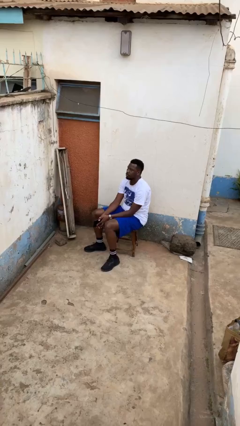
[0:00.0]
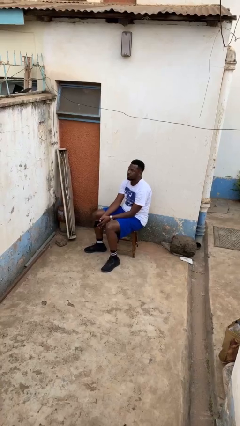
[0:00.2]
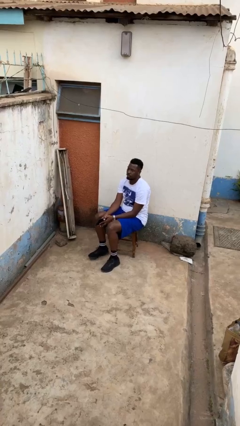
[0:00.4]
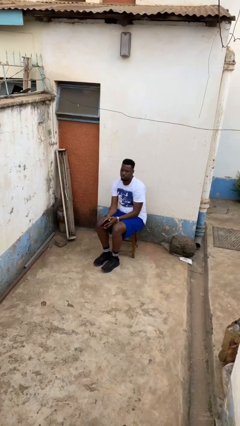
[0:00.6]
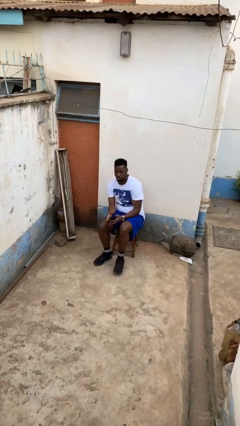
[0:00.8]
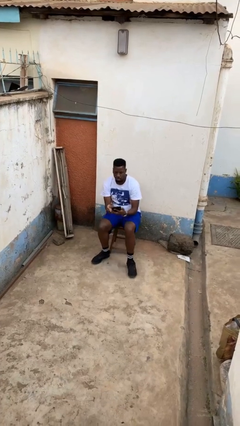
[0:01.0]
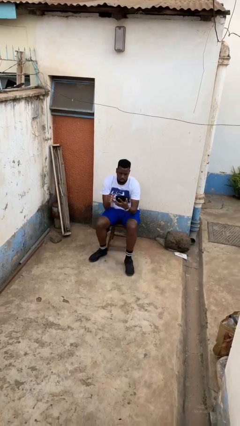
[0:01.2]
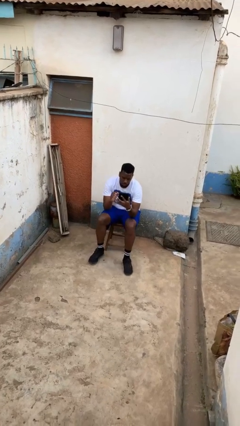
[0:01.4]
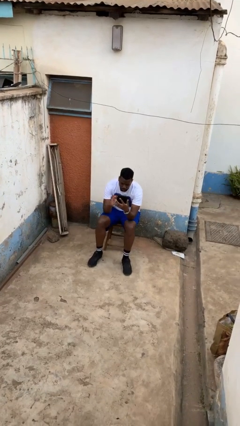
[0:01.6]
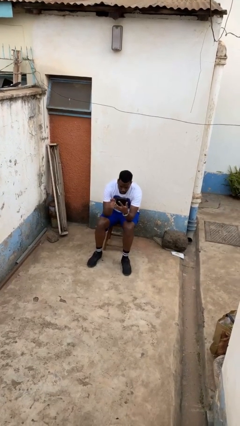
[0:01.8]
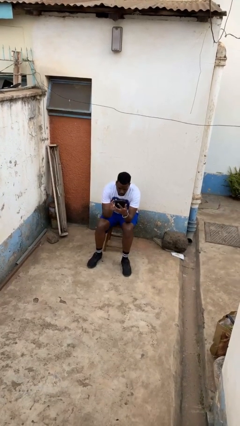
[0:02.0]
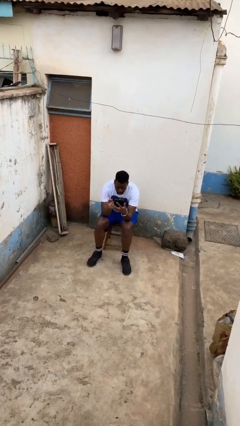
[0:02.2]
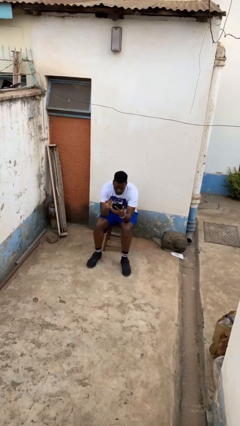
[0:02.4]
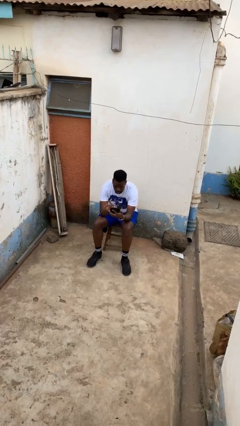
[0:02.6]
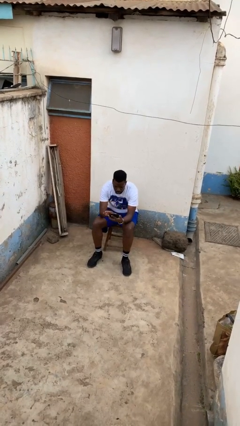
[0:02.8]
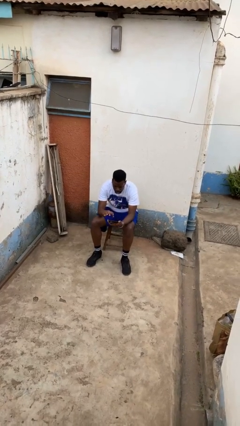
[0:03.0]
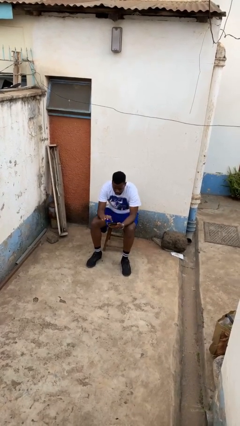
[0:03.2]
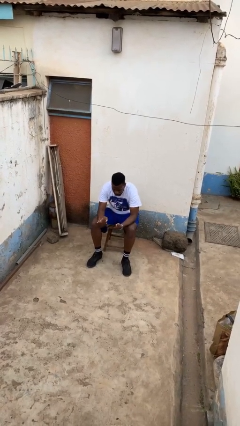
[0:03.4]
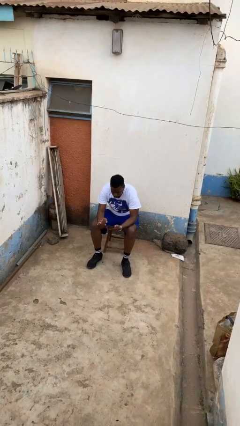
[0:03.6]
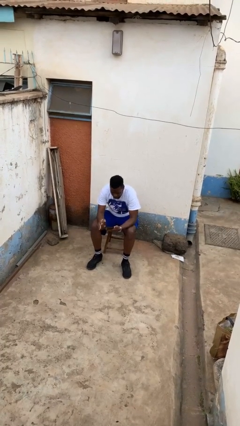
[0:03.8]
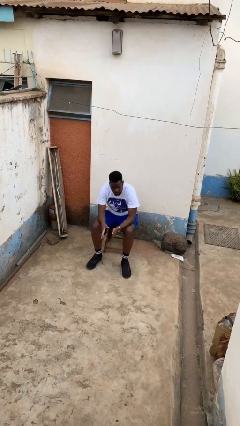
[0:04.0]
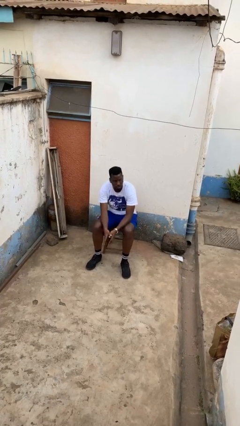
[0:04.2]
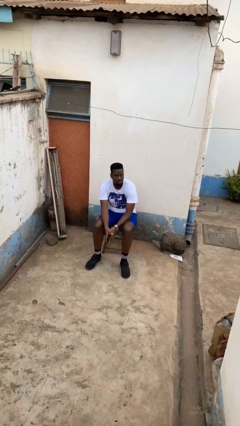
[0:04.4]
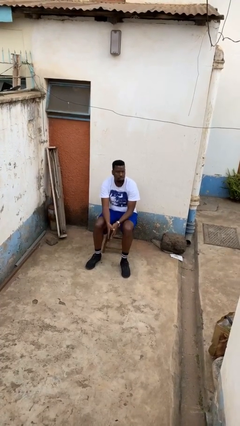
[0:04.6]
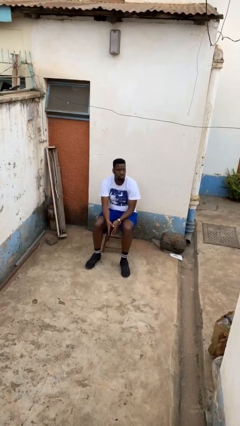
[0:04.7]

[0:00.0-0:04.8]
person interacts with tablet

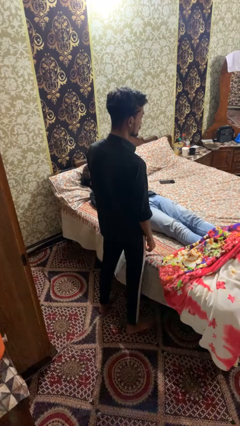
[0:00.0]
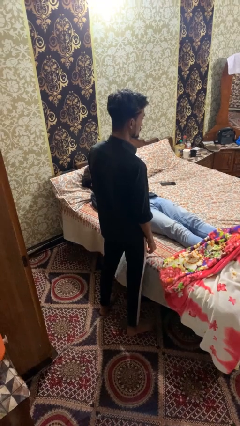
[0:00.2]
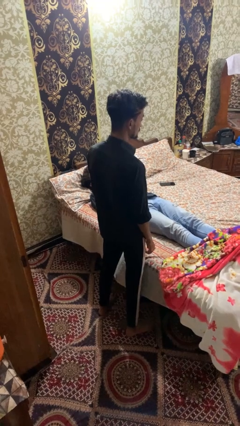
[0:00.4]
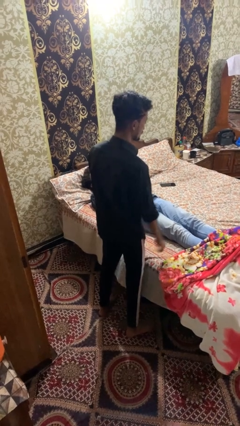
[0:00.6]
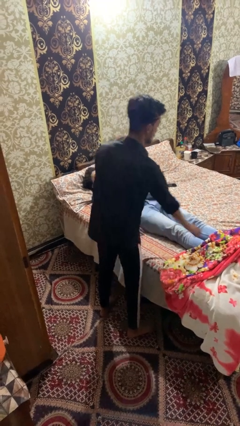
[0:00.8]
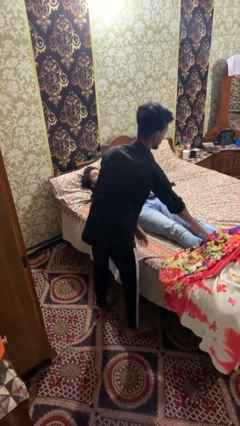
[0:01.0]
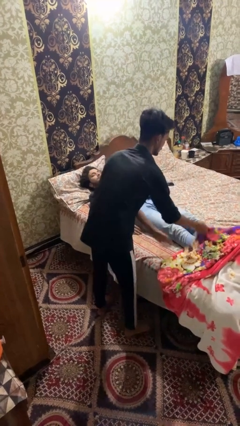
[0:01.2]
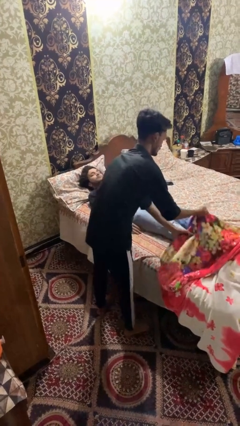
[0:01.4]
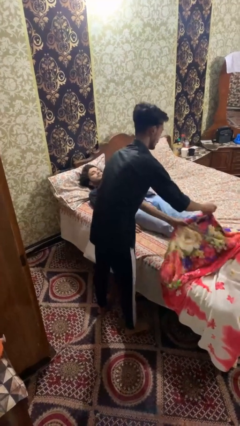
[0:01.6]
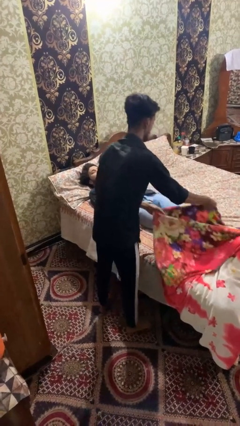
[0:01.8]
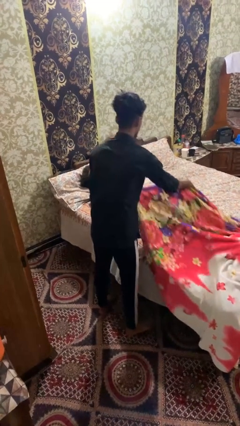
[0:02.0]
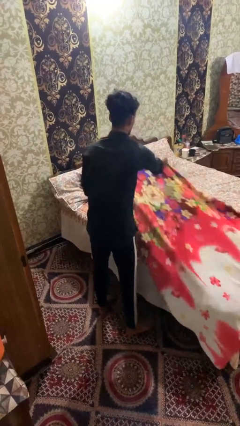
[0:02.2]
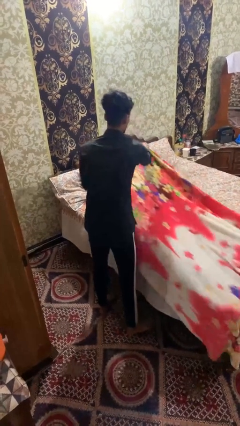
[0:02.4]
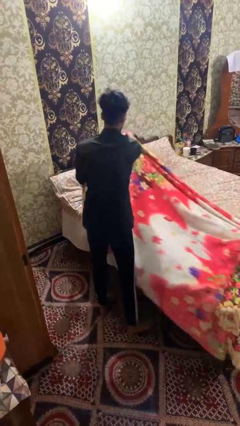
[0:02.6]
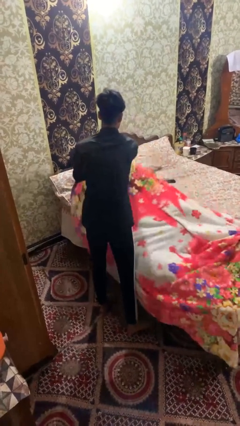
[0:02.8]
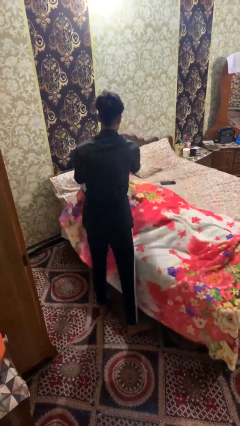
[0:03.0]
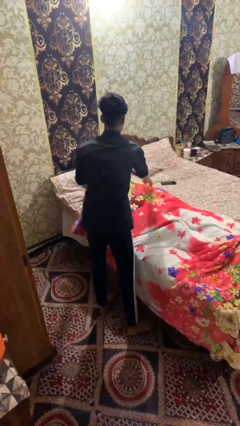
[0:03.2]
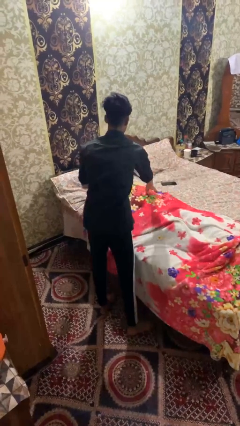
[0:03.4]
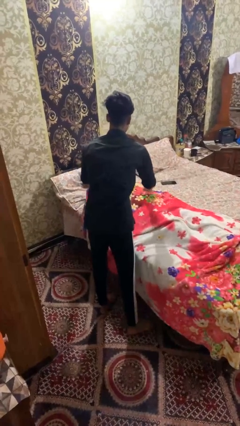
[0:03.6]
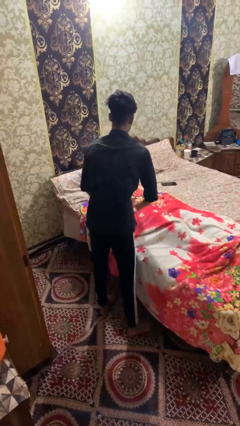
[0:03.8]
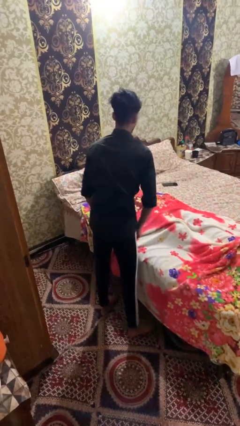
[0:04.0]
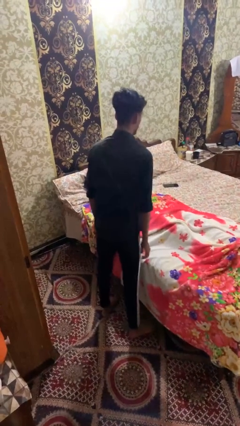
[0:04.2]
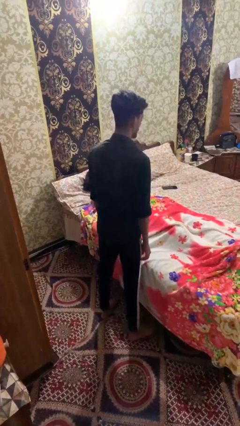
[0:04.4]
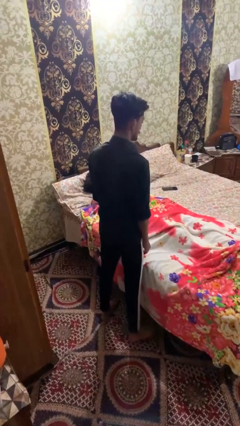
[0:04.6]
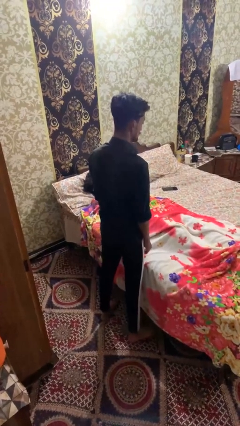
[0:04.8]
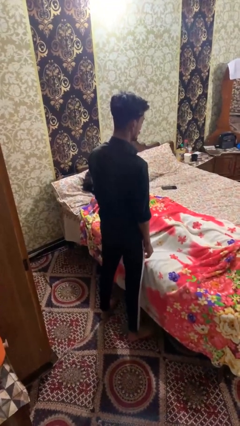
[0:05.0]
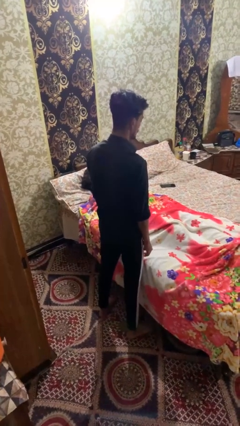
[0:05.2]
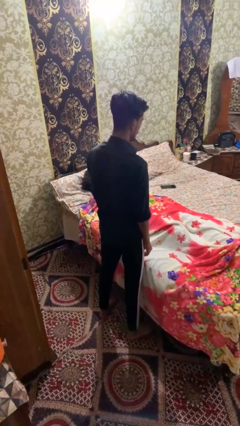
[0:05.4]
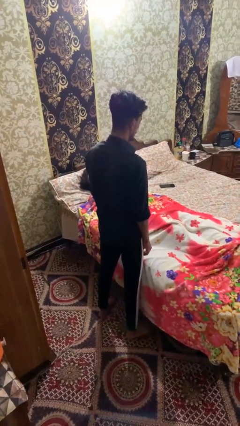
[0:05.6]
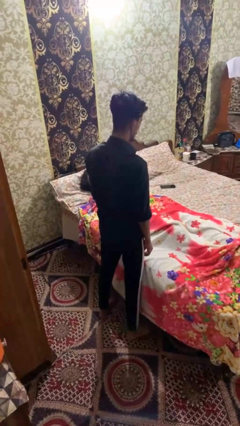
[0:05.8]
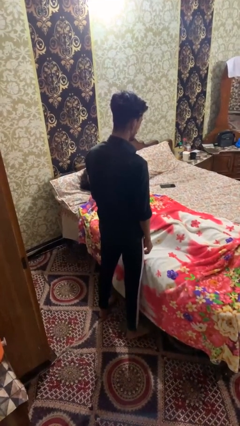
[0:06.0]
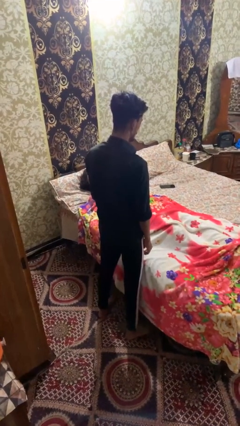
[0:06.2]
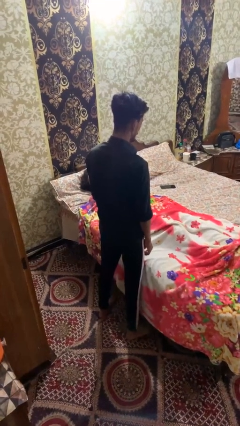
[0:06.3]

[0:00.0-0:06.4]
person covers friend with blanket

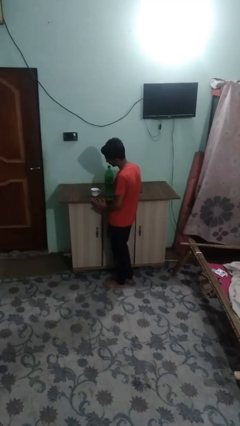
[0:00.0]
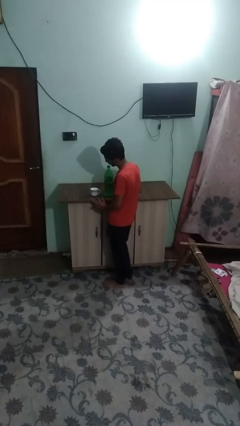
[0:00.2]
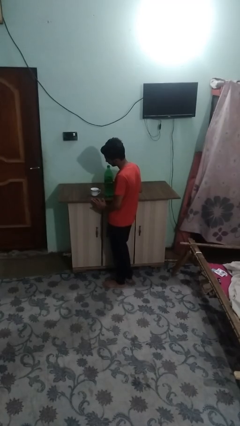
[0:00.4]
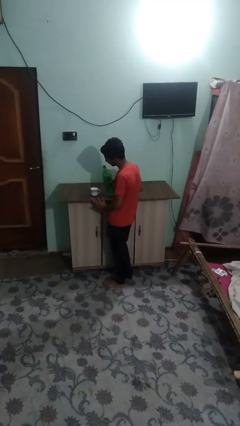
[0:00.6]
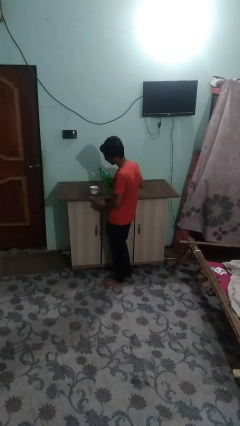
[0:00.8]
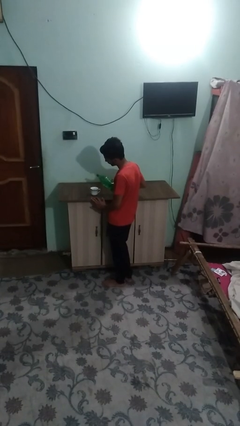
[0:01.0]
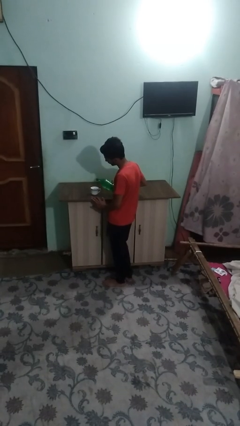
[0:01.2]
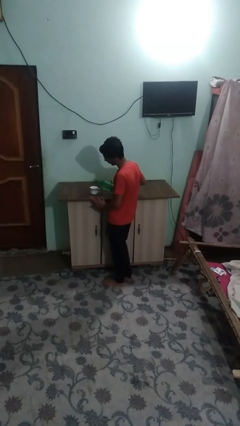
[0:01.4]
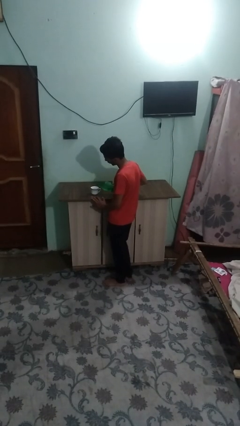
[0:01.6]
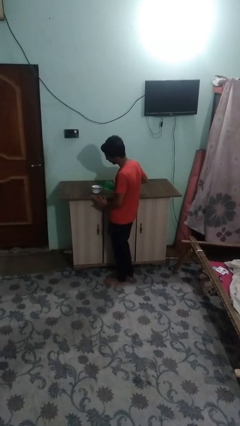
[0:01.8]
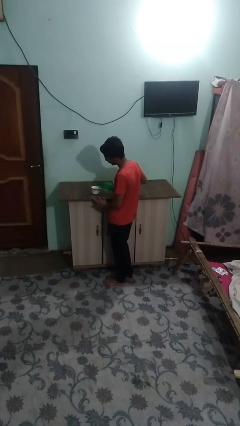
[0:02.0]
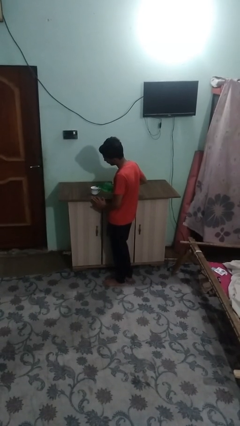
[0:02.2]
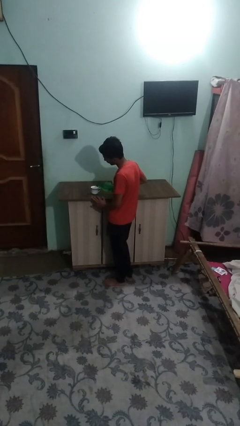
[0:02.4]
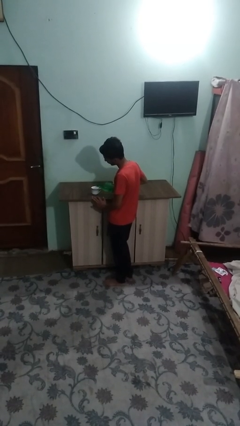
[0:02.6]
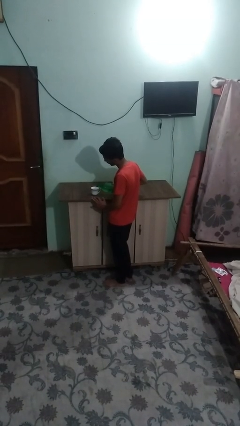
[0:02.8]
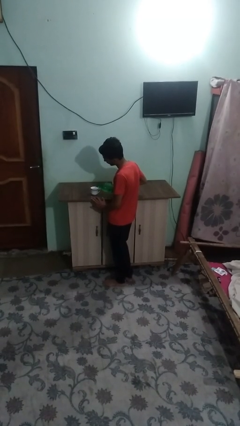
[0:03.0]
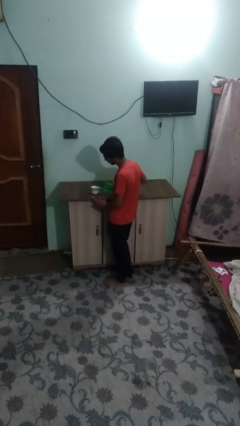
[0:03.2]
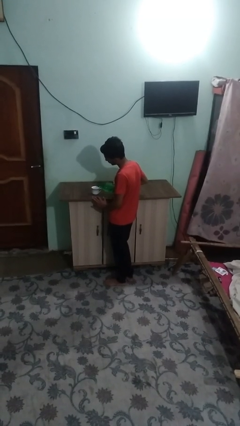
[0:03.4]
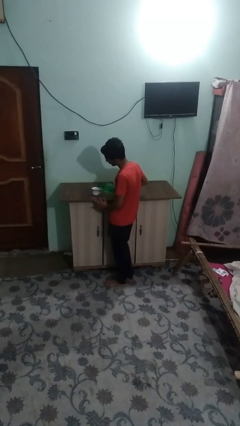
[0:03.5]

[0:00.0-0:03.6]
person pours liquid into cup

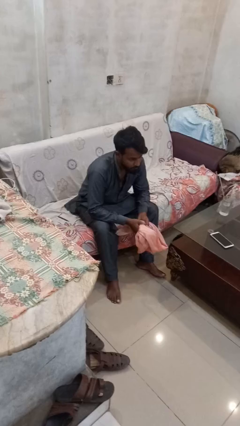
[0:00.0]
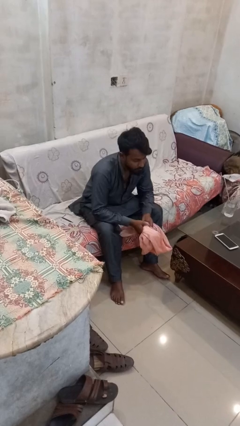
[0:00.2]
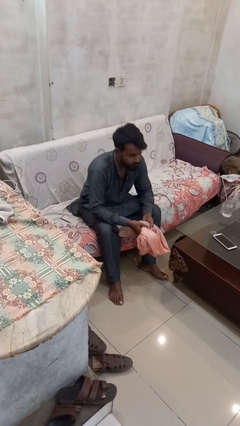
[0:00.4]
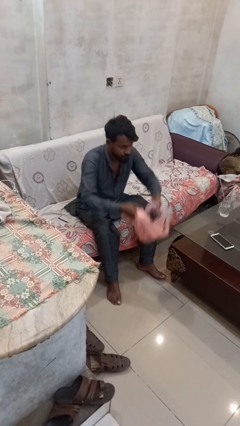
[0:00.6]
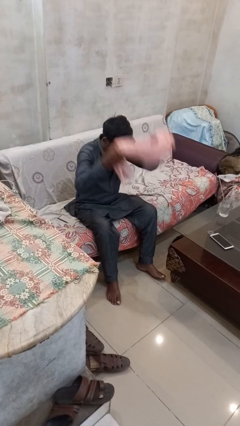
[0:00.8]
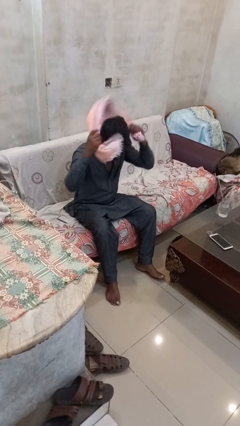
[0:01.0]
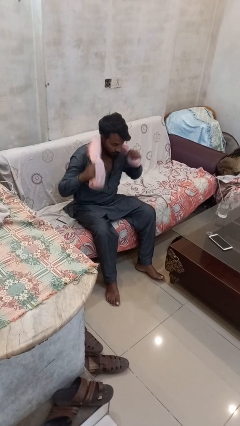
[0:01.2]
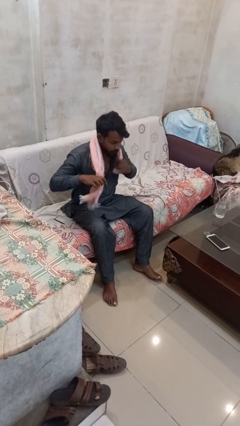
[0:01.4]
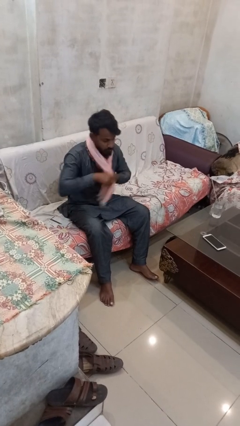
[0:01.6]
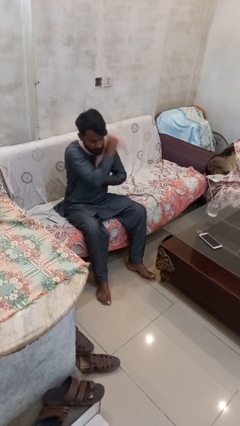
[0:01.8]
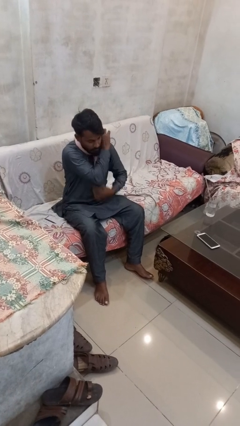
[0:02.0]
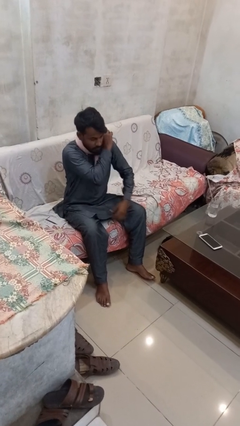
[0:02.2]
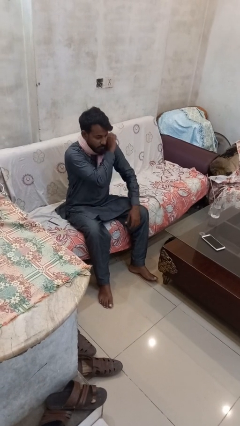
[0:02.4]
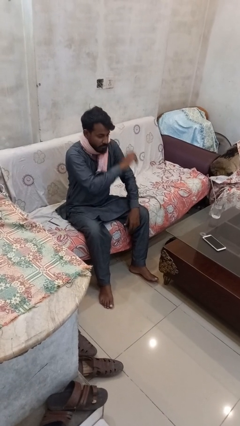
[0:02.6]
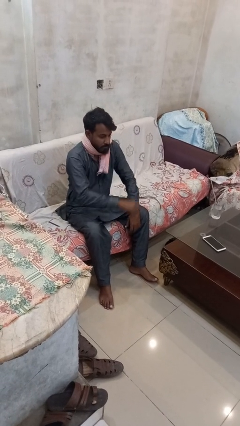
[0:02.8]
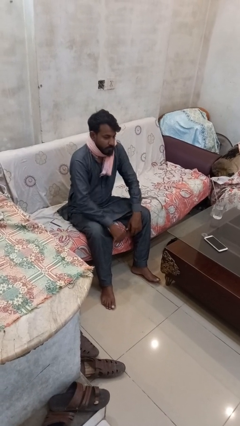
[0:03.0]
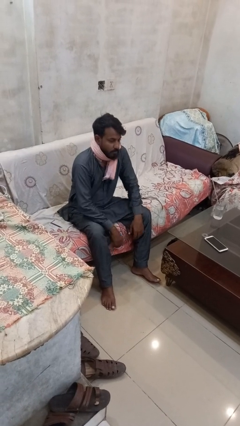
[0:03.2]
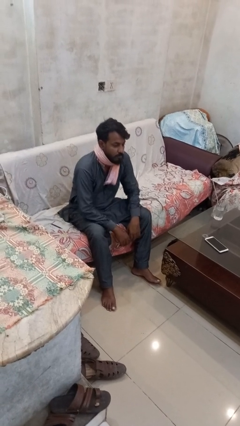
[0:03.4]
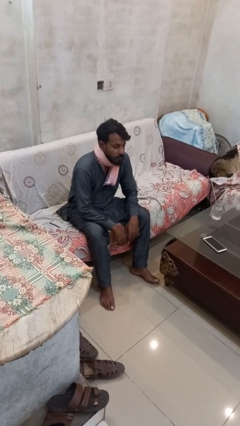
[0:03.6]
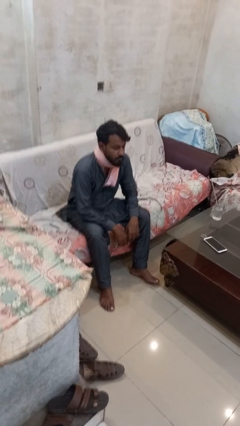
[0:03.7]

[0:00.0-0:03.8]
person puts on scarf
